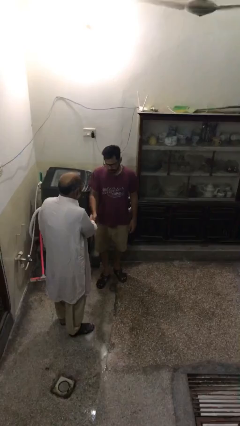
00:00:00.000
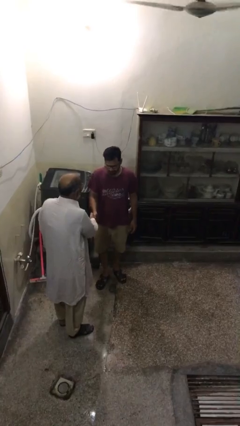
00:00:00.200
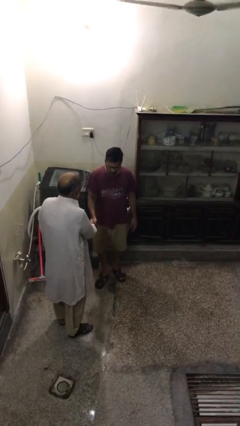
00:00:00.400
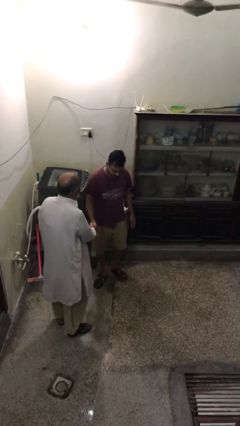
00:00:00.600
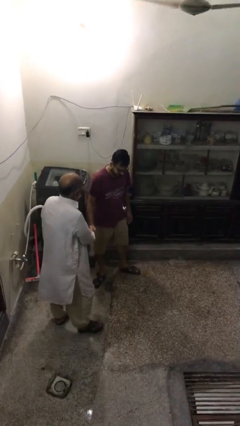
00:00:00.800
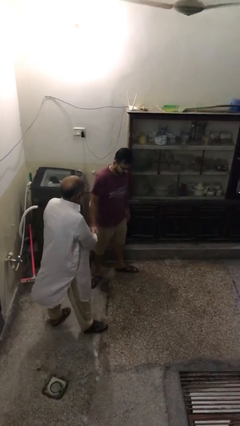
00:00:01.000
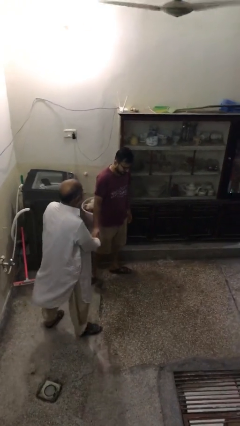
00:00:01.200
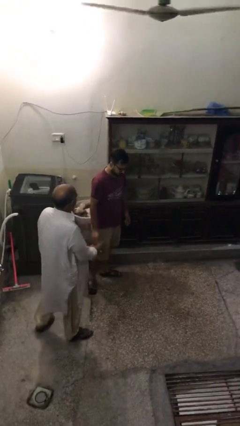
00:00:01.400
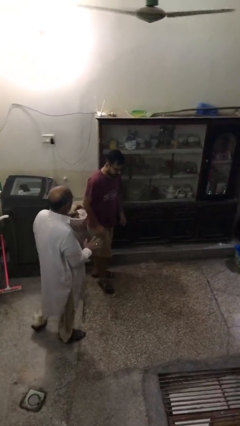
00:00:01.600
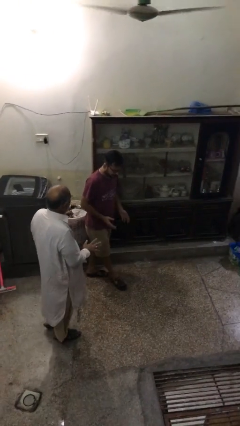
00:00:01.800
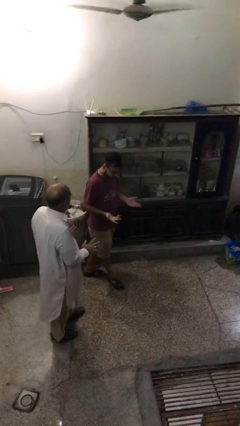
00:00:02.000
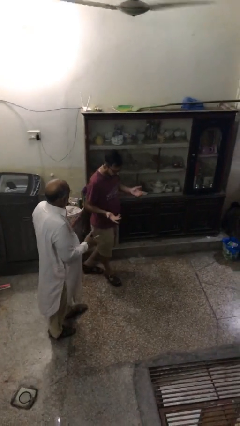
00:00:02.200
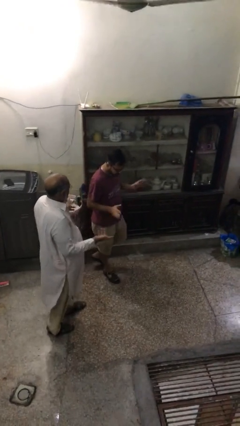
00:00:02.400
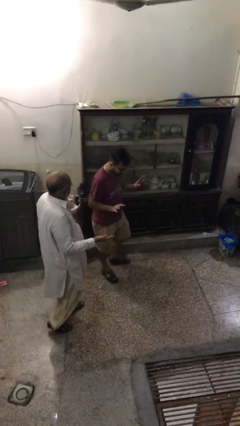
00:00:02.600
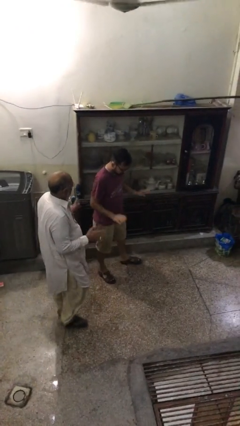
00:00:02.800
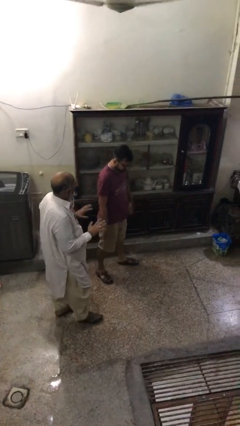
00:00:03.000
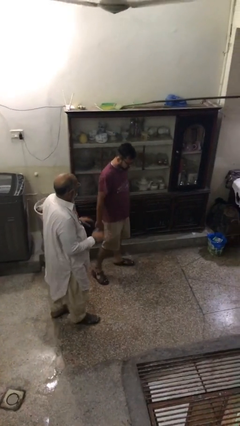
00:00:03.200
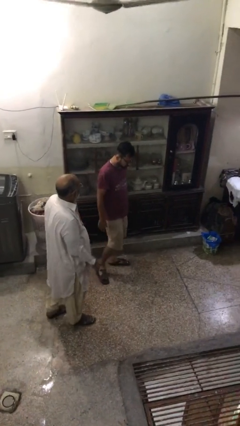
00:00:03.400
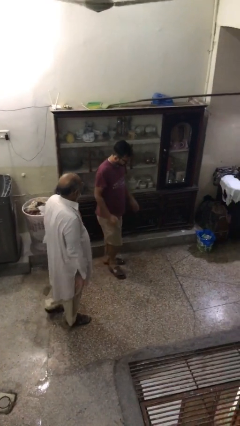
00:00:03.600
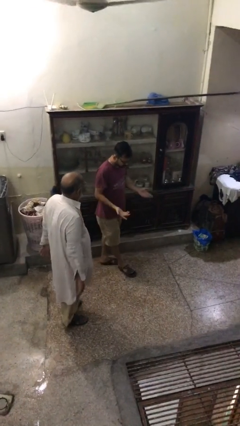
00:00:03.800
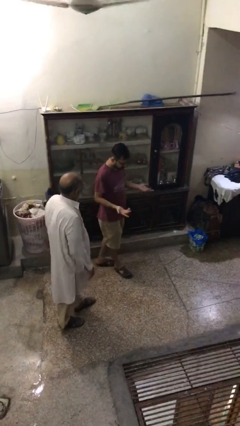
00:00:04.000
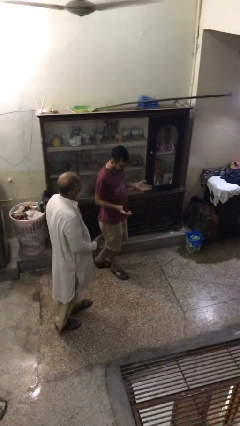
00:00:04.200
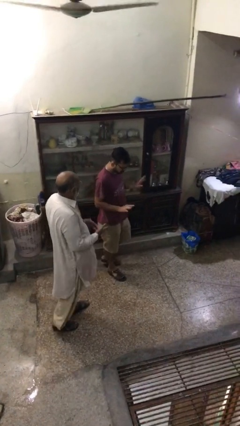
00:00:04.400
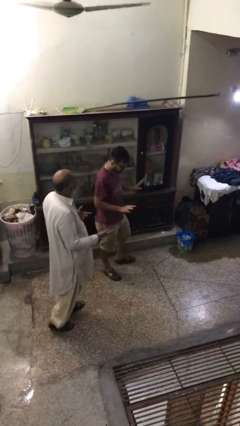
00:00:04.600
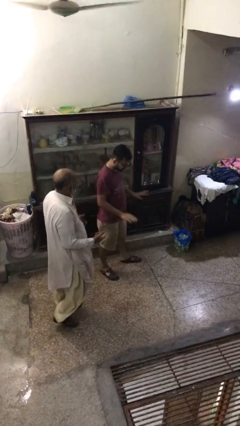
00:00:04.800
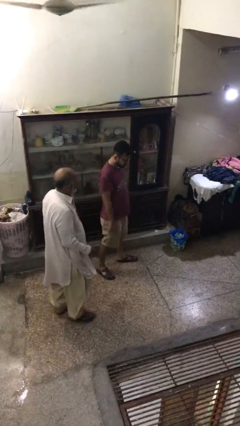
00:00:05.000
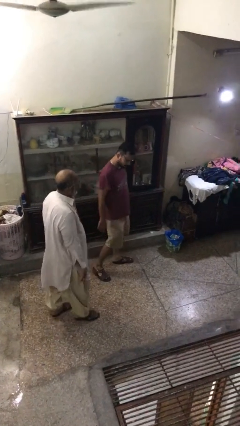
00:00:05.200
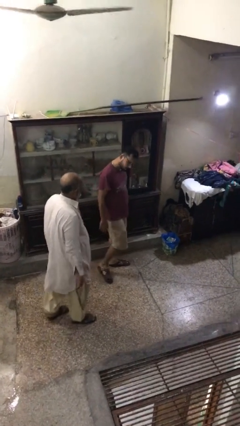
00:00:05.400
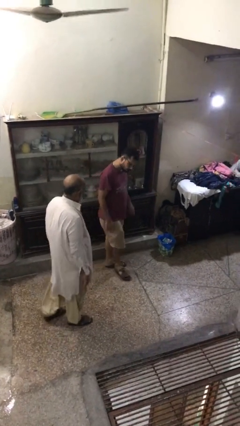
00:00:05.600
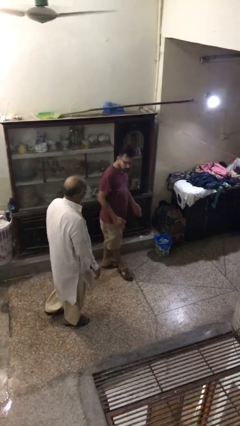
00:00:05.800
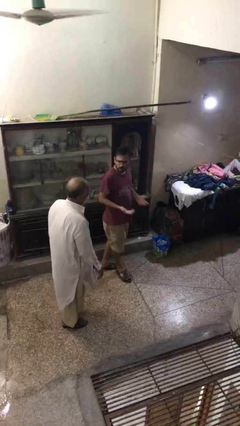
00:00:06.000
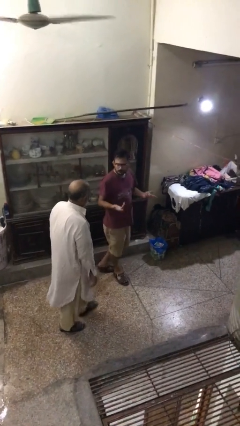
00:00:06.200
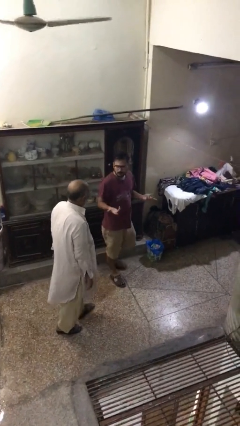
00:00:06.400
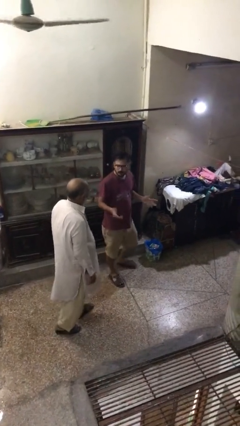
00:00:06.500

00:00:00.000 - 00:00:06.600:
person talks to person

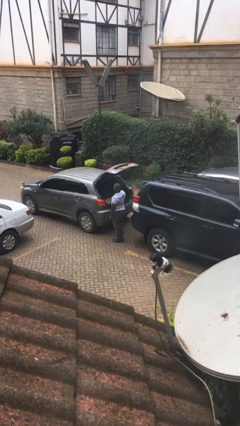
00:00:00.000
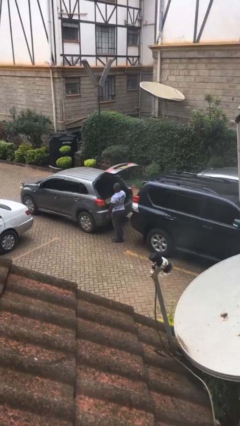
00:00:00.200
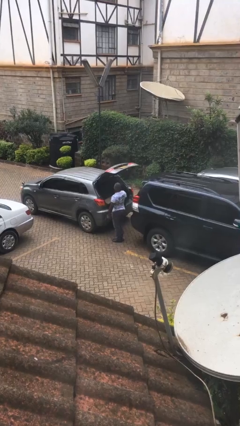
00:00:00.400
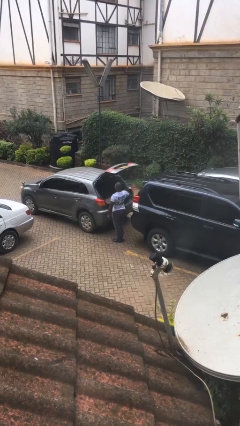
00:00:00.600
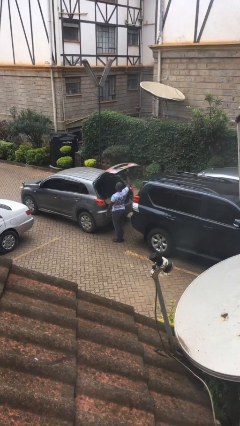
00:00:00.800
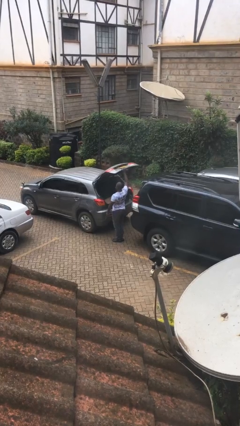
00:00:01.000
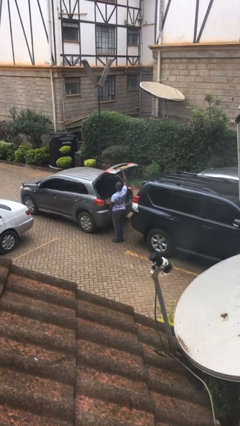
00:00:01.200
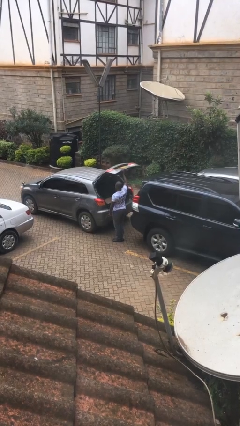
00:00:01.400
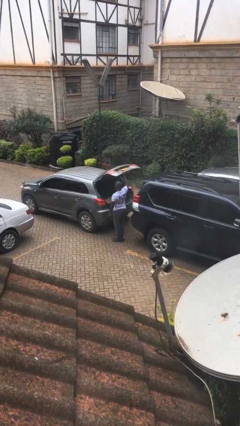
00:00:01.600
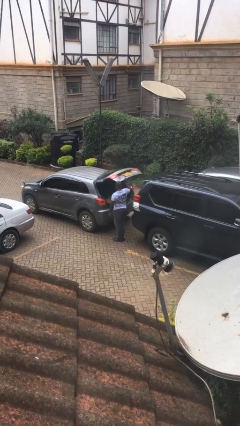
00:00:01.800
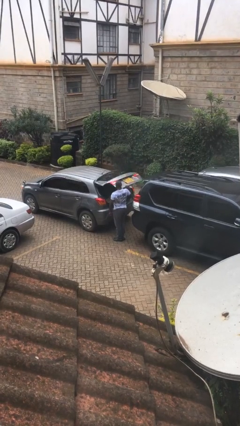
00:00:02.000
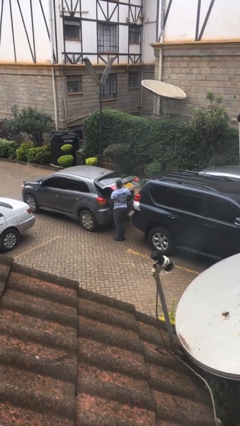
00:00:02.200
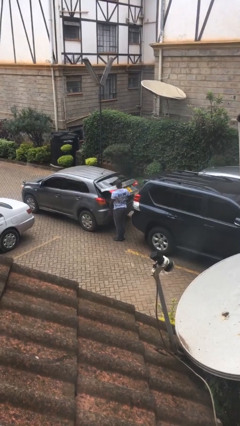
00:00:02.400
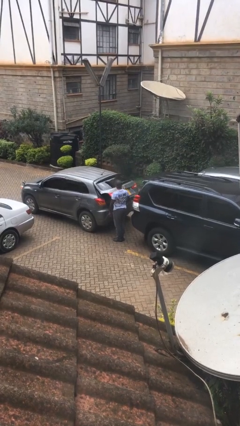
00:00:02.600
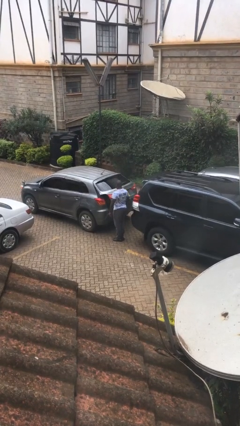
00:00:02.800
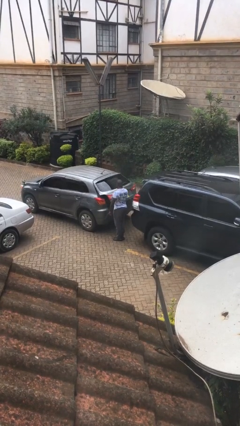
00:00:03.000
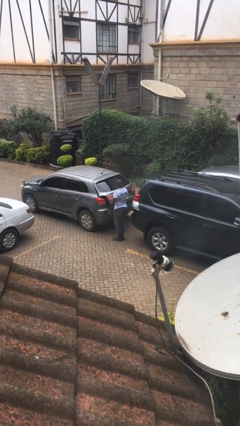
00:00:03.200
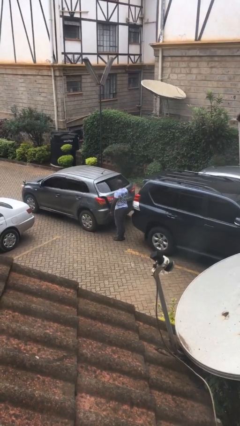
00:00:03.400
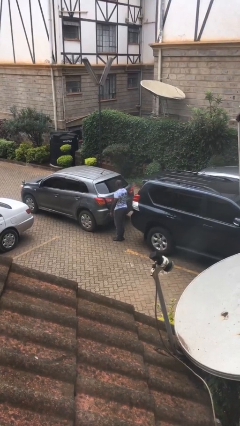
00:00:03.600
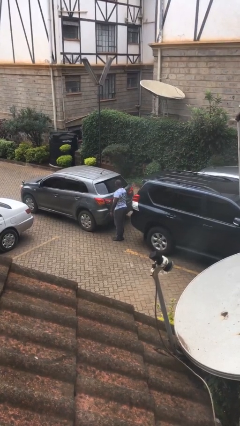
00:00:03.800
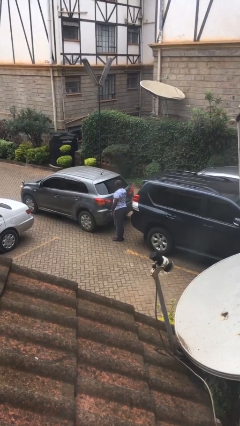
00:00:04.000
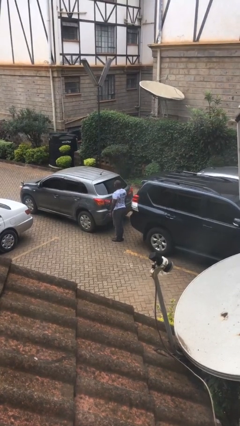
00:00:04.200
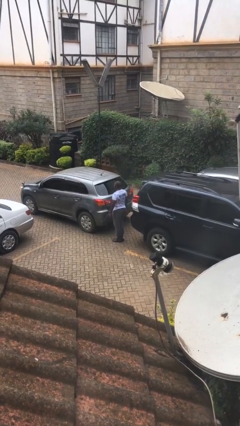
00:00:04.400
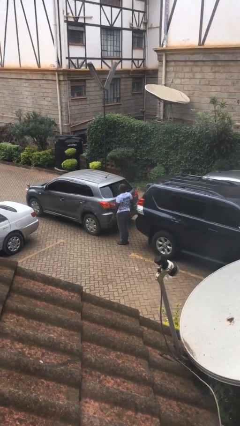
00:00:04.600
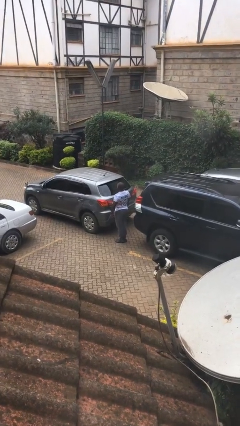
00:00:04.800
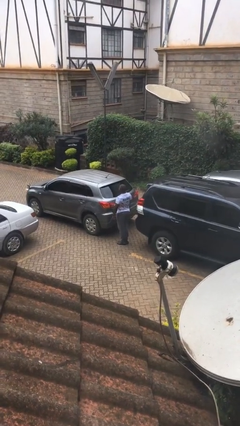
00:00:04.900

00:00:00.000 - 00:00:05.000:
person closes car trunk

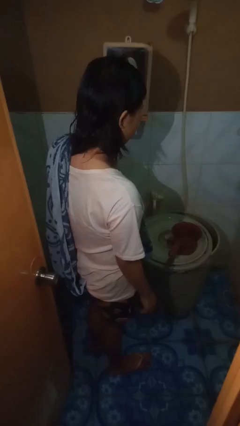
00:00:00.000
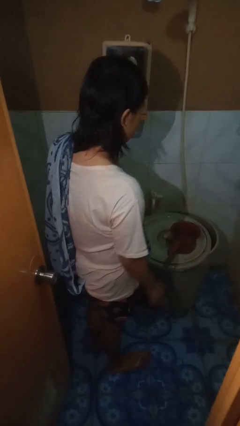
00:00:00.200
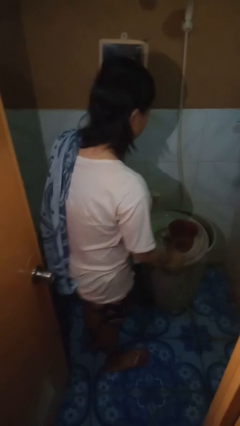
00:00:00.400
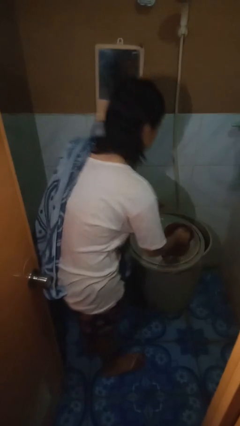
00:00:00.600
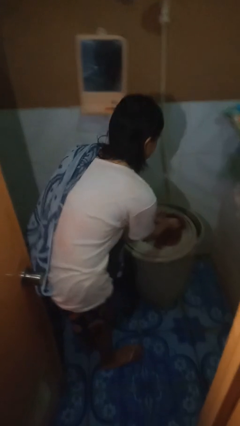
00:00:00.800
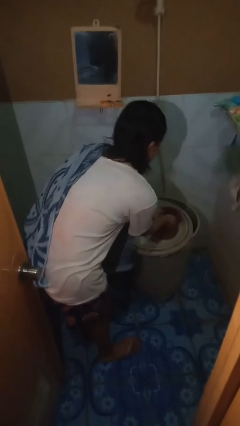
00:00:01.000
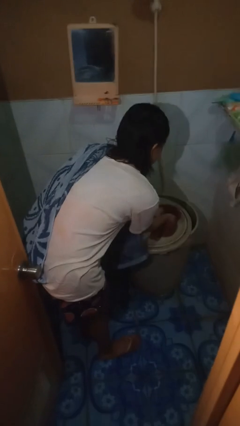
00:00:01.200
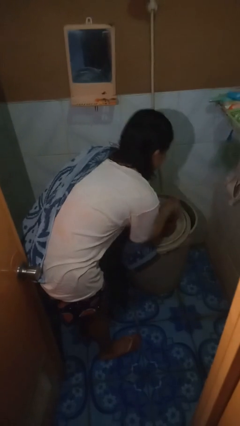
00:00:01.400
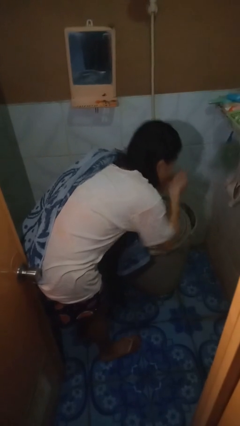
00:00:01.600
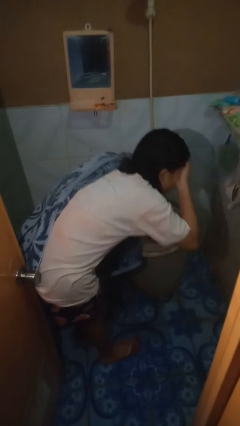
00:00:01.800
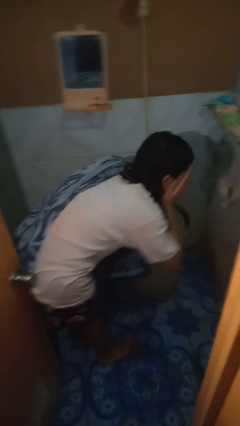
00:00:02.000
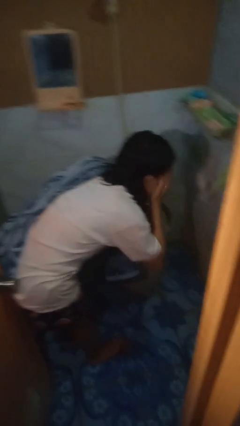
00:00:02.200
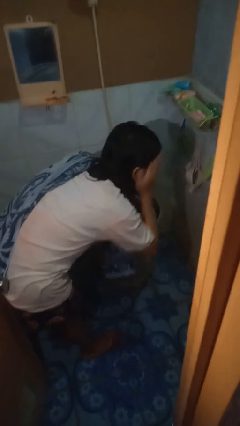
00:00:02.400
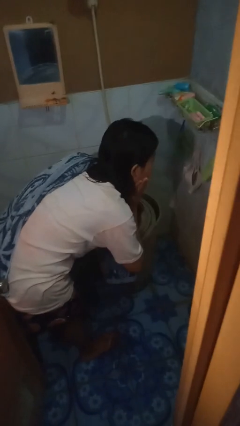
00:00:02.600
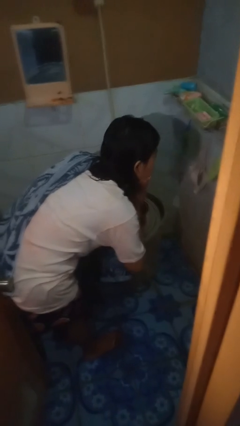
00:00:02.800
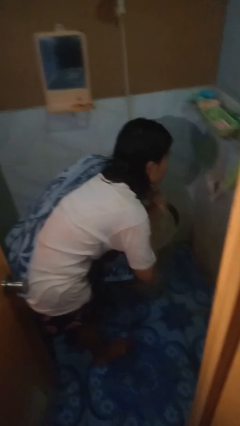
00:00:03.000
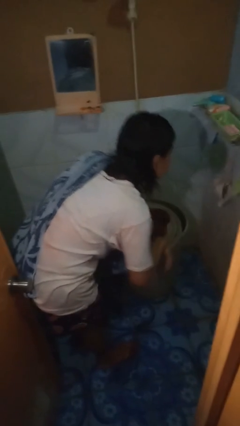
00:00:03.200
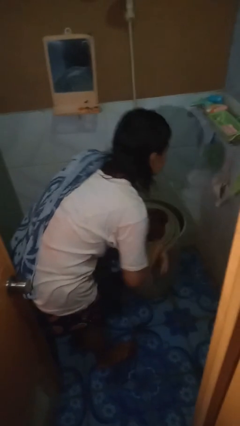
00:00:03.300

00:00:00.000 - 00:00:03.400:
person washes face

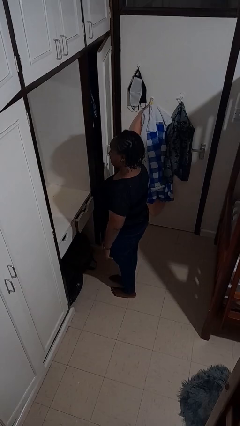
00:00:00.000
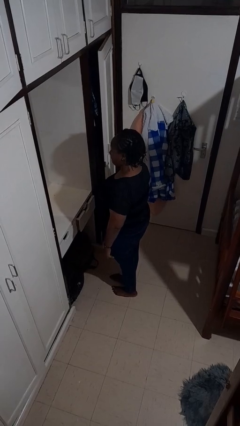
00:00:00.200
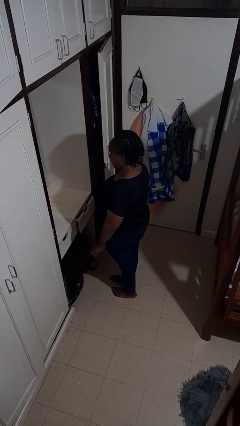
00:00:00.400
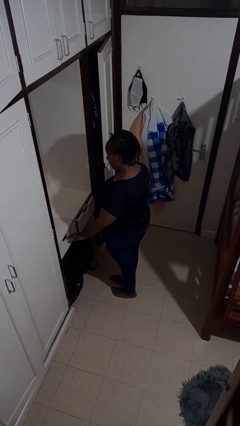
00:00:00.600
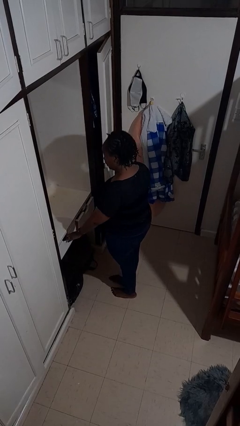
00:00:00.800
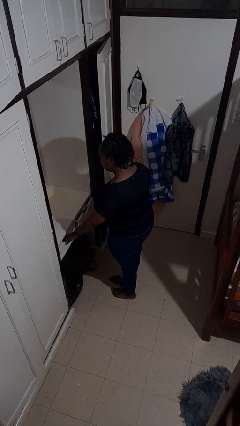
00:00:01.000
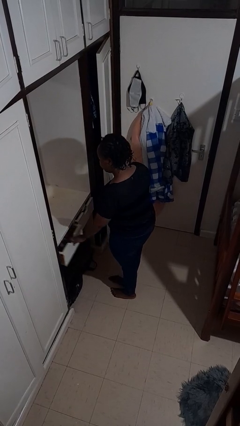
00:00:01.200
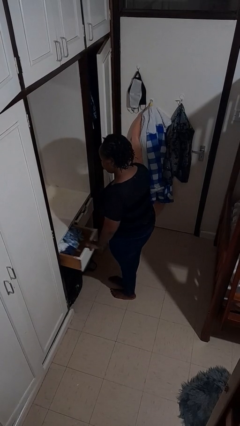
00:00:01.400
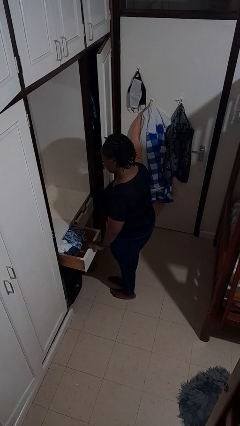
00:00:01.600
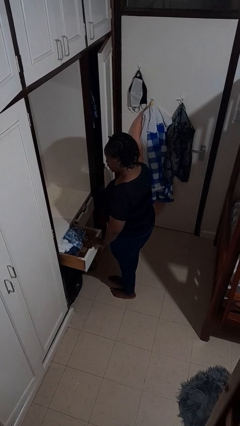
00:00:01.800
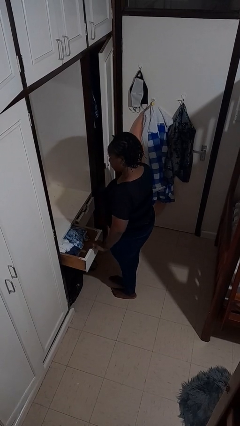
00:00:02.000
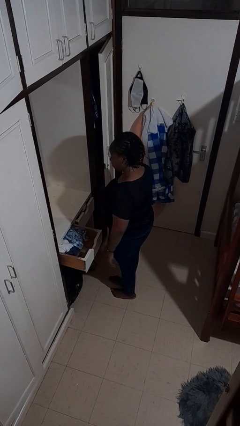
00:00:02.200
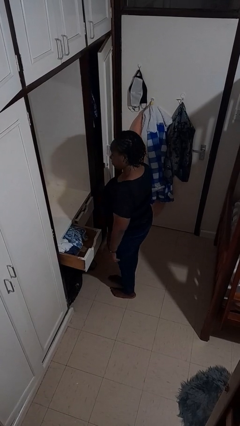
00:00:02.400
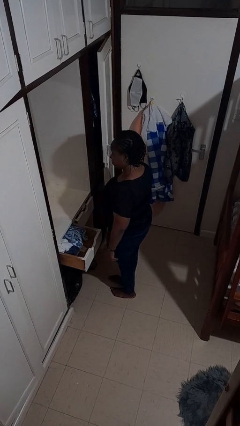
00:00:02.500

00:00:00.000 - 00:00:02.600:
person opens dresser drawer

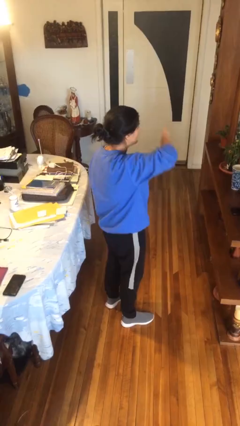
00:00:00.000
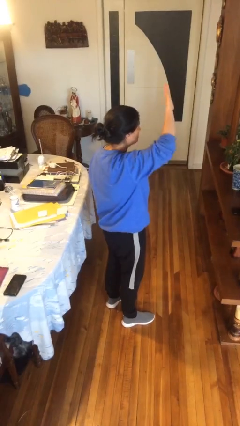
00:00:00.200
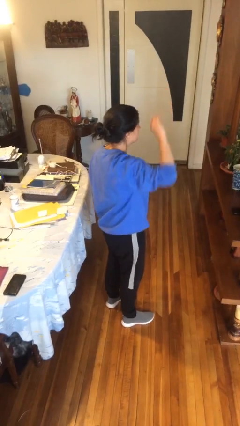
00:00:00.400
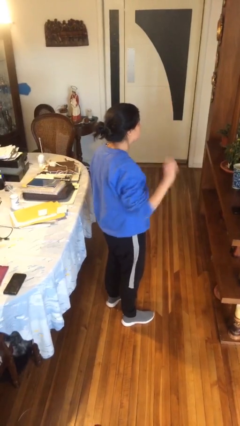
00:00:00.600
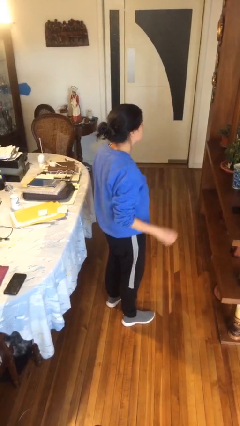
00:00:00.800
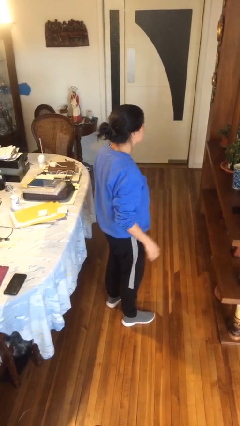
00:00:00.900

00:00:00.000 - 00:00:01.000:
person gestures swipe up
